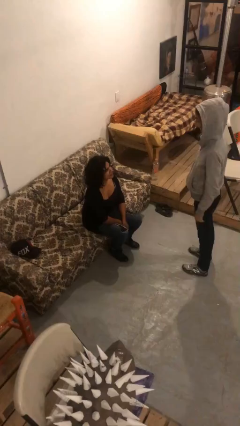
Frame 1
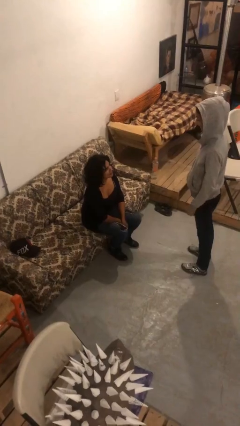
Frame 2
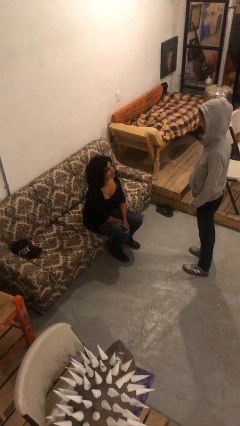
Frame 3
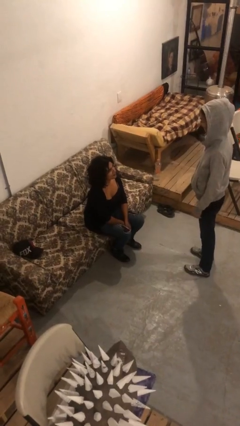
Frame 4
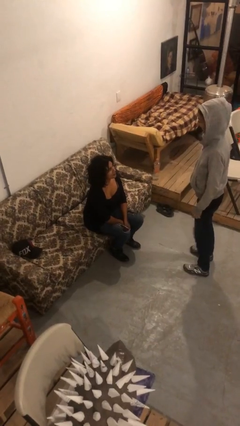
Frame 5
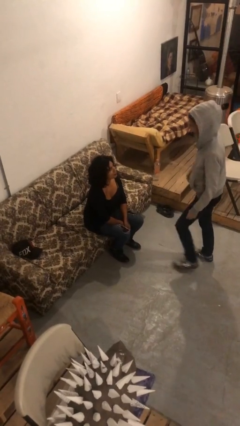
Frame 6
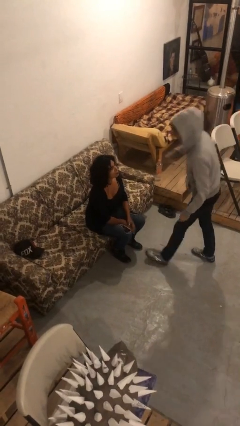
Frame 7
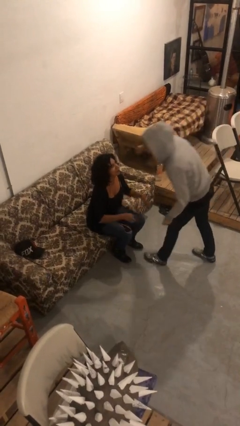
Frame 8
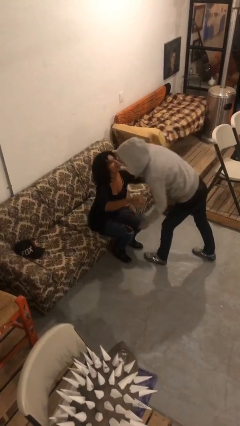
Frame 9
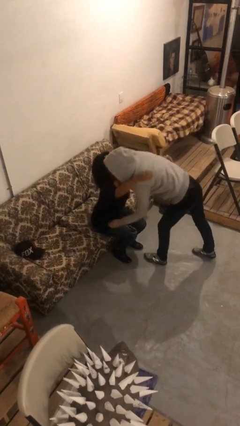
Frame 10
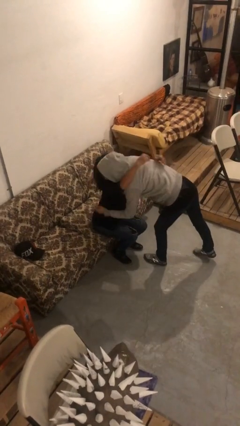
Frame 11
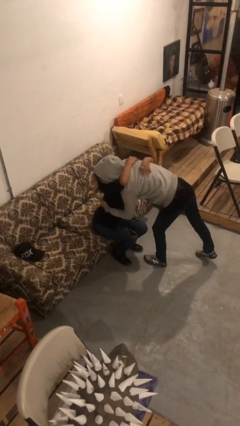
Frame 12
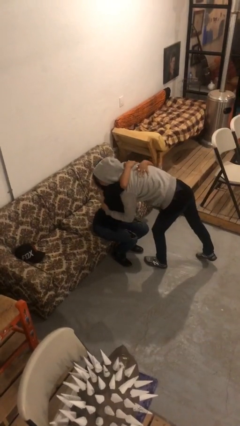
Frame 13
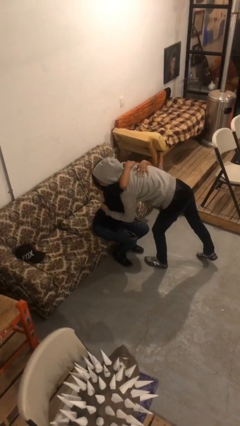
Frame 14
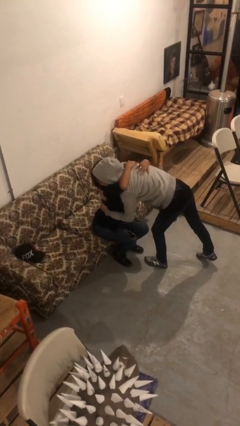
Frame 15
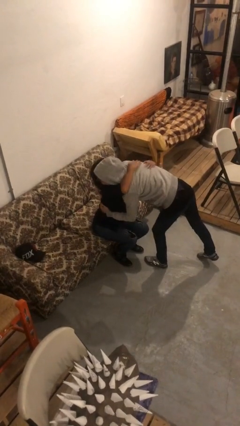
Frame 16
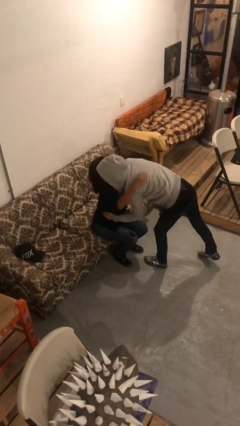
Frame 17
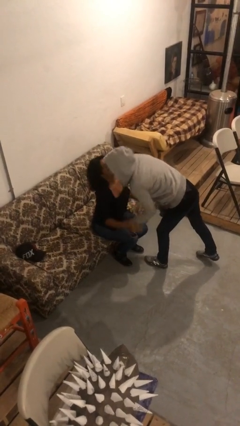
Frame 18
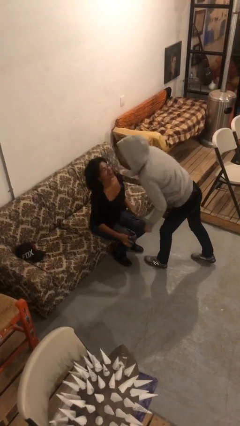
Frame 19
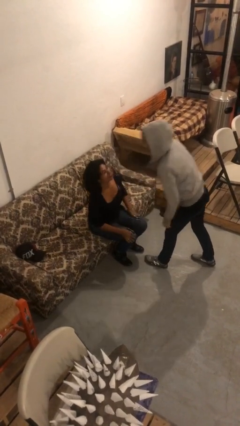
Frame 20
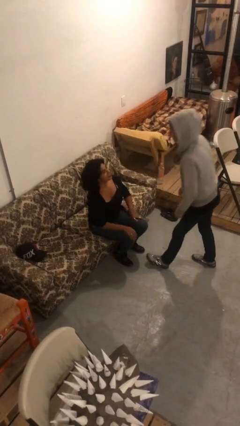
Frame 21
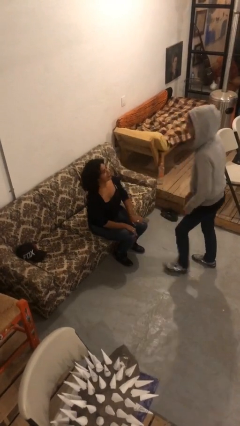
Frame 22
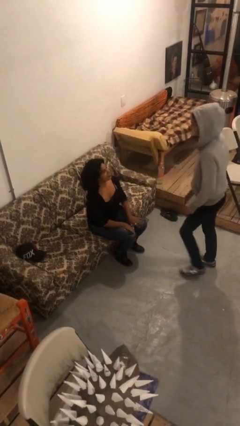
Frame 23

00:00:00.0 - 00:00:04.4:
person embraces person

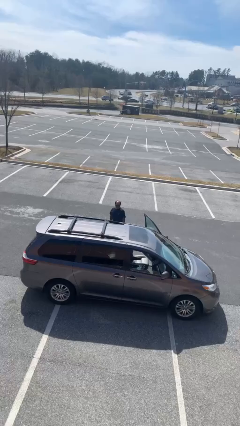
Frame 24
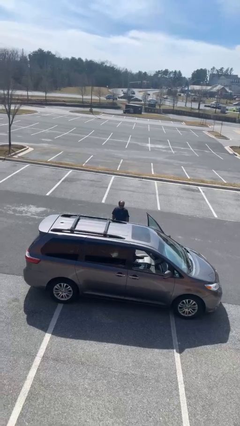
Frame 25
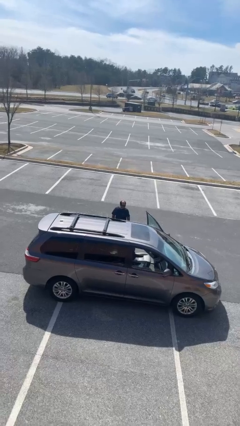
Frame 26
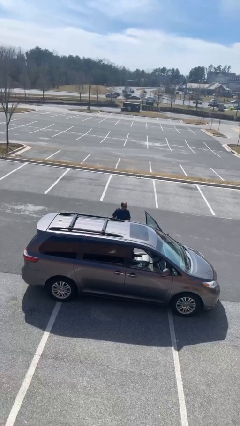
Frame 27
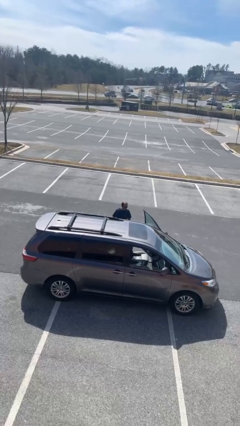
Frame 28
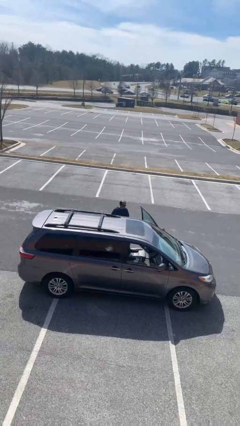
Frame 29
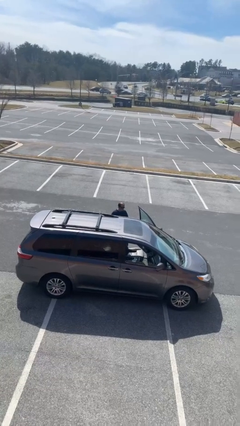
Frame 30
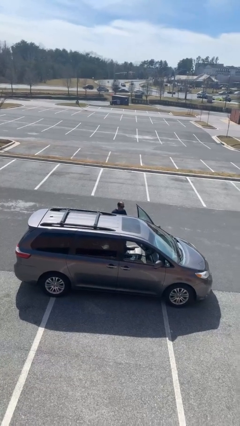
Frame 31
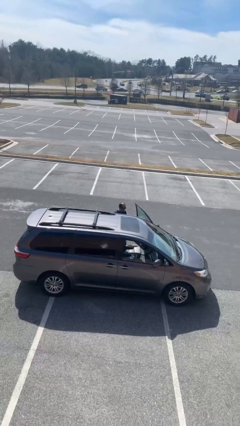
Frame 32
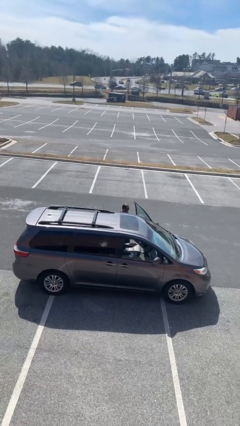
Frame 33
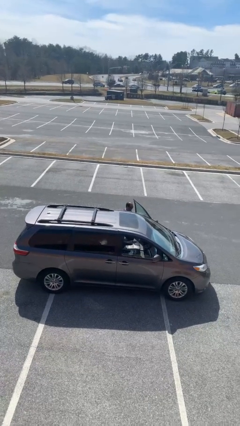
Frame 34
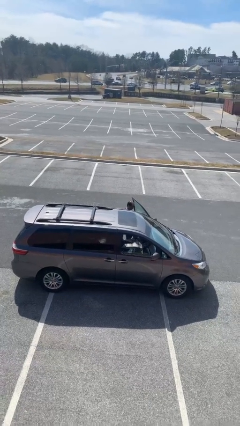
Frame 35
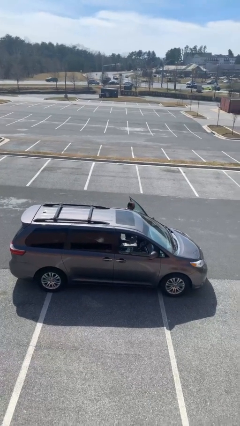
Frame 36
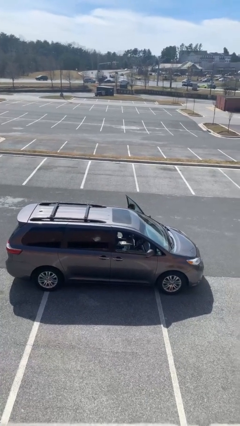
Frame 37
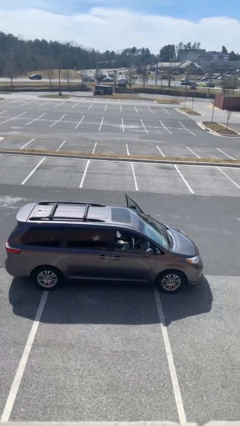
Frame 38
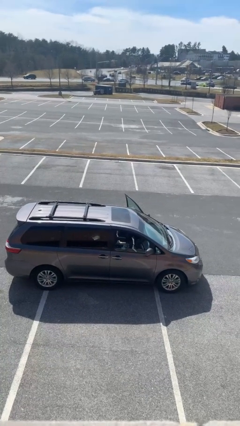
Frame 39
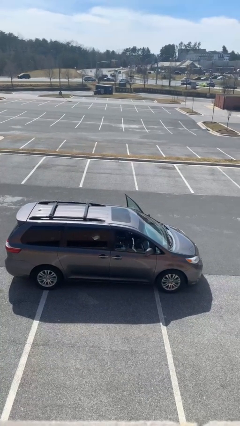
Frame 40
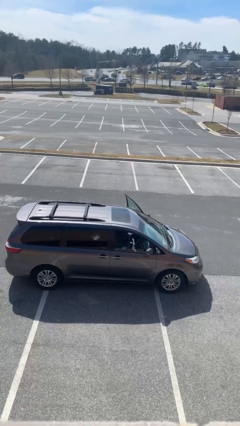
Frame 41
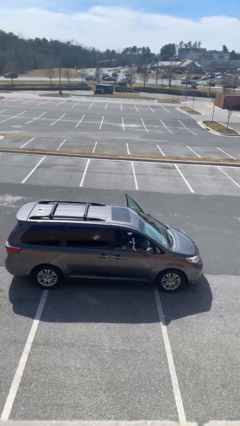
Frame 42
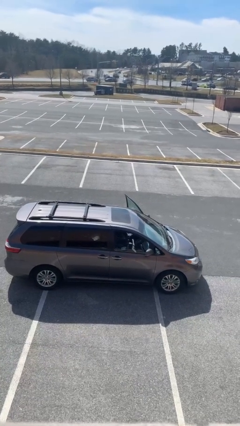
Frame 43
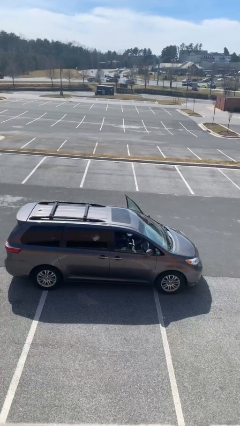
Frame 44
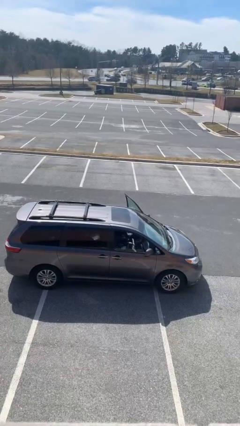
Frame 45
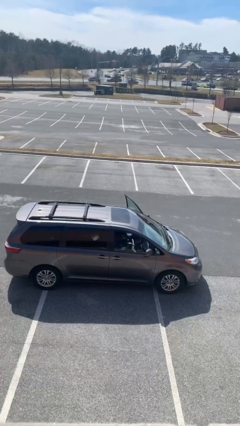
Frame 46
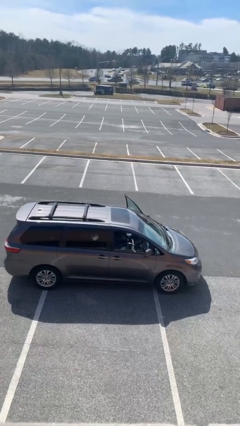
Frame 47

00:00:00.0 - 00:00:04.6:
person enters car

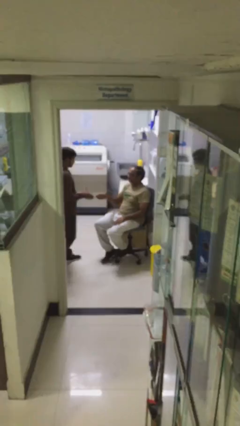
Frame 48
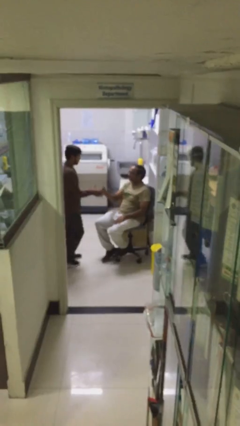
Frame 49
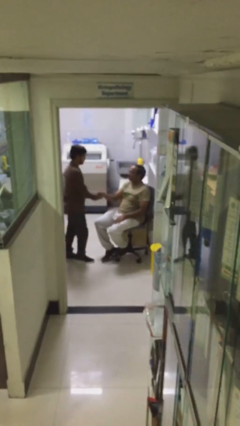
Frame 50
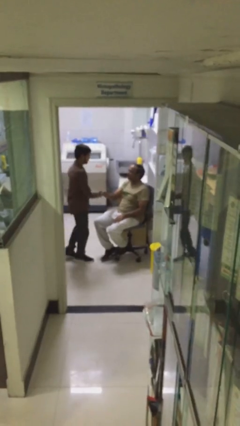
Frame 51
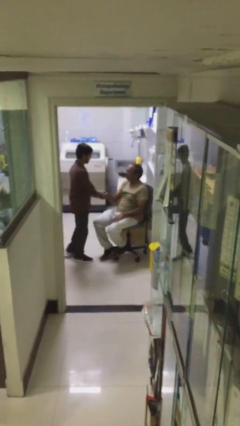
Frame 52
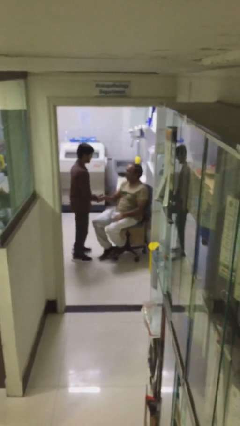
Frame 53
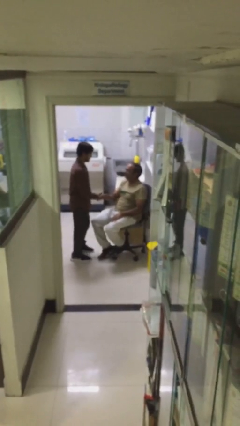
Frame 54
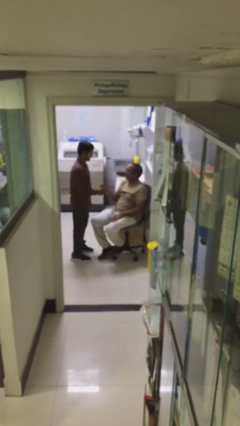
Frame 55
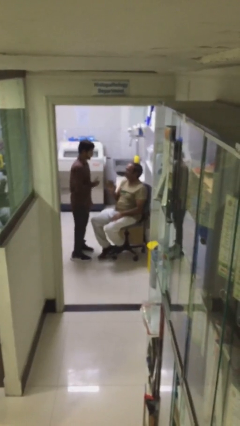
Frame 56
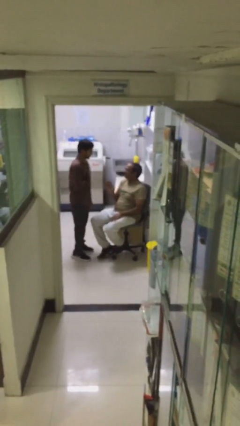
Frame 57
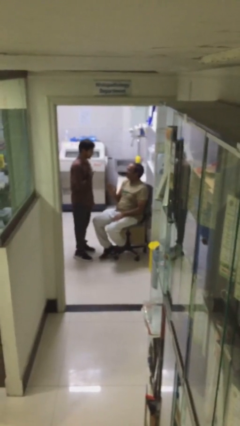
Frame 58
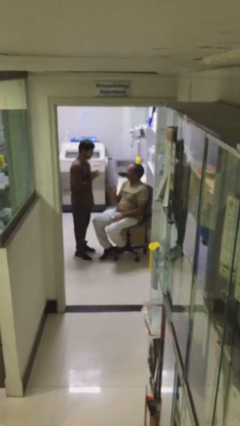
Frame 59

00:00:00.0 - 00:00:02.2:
person shakes hand

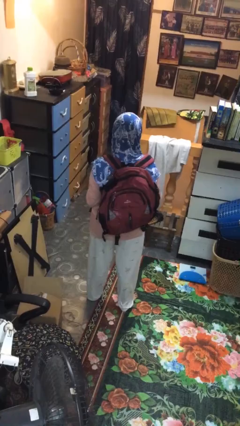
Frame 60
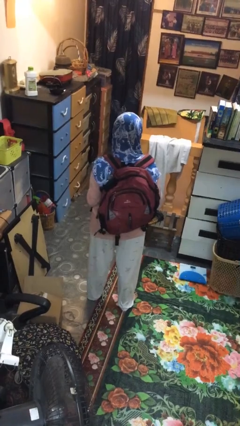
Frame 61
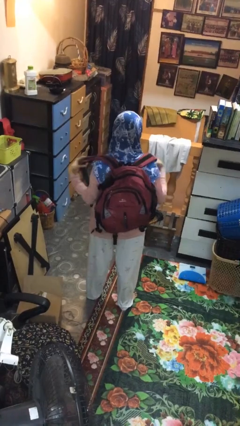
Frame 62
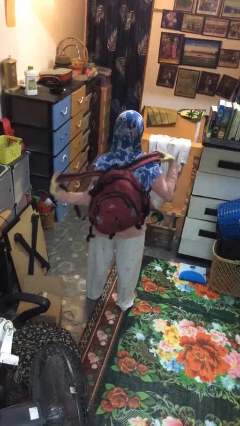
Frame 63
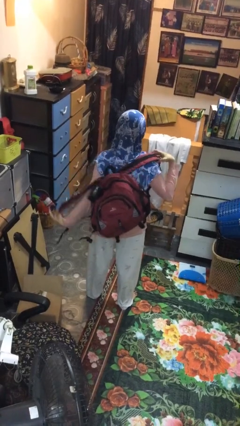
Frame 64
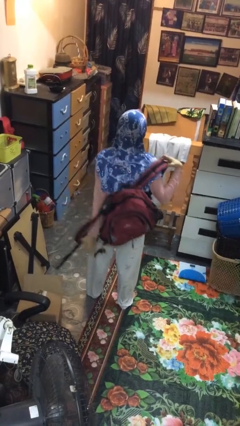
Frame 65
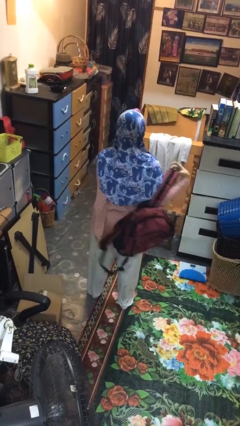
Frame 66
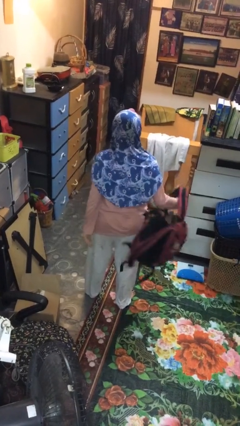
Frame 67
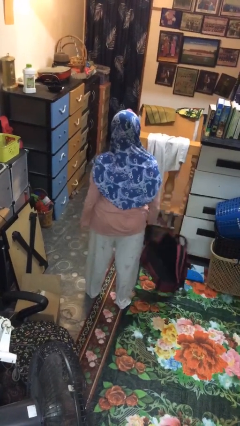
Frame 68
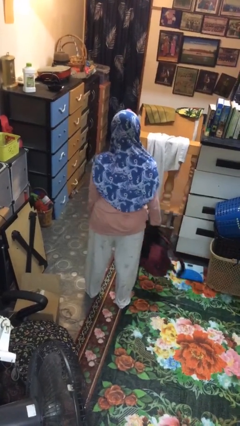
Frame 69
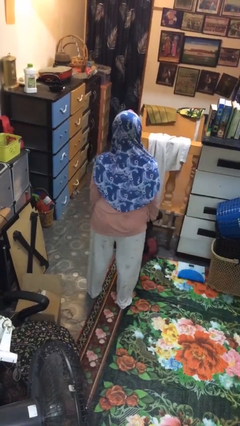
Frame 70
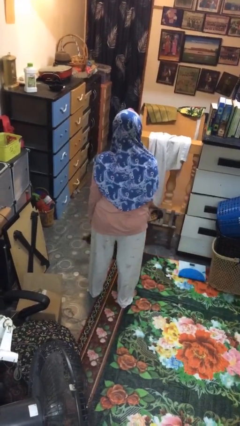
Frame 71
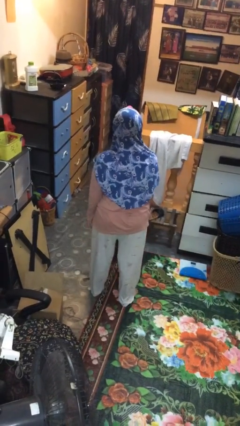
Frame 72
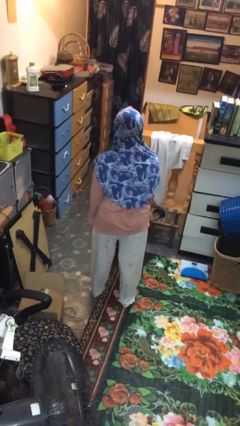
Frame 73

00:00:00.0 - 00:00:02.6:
person takes off backpack

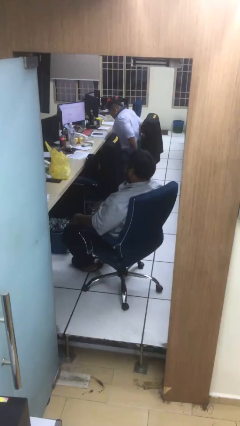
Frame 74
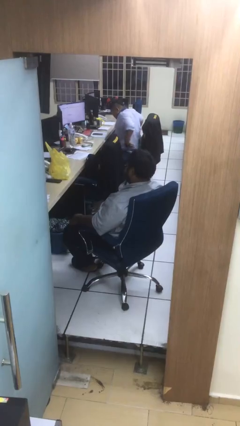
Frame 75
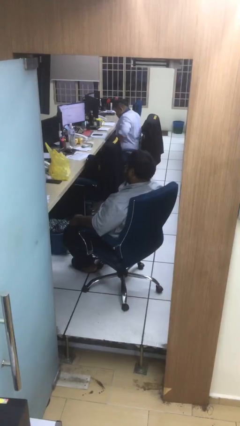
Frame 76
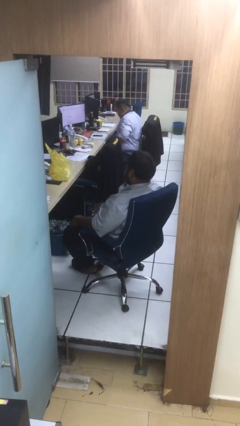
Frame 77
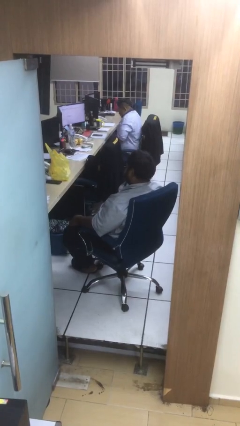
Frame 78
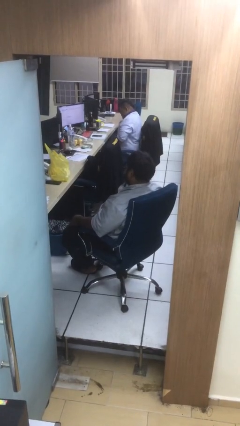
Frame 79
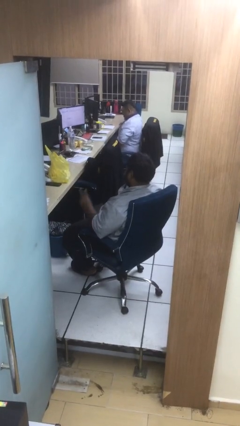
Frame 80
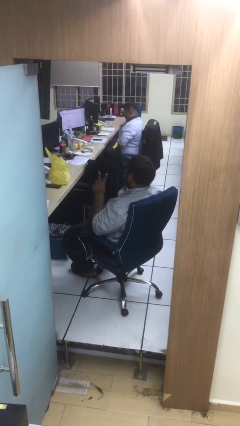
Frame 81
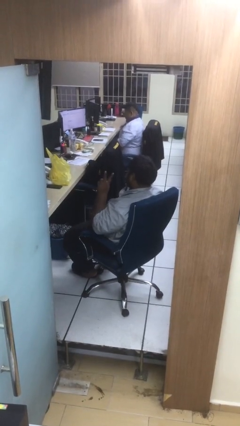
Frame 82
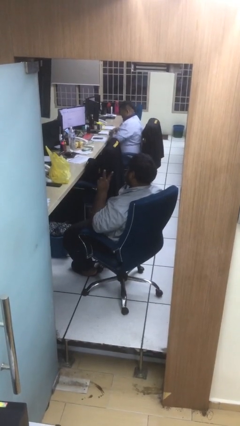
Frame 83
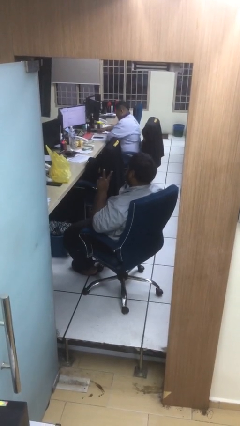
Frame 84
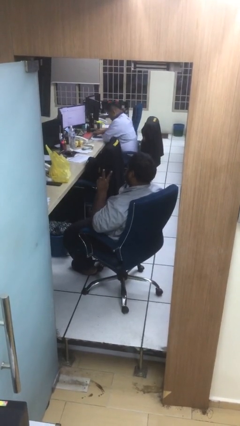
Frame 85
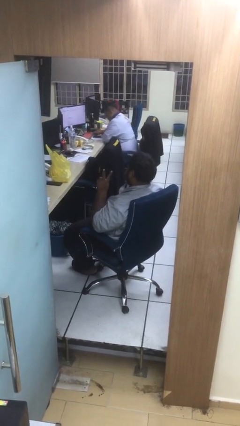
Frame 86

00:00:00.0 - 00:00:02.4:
person gestures peace

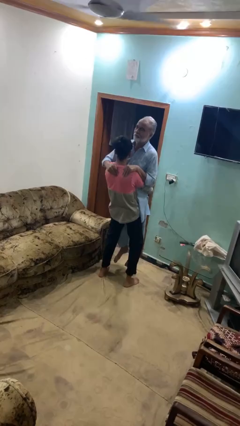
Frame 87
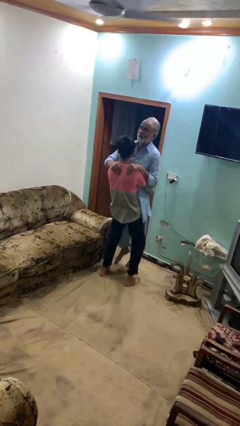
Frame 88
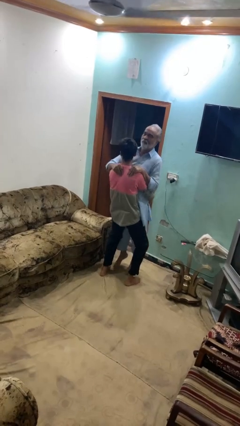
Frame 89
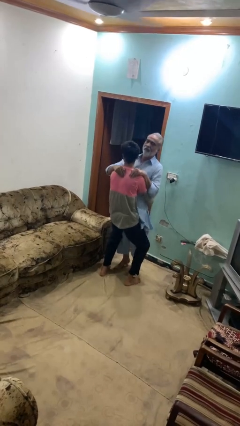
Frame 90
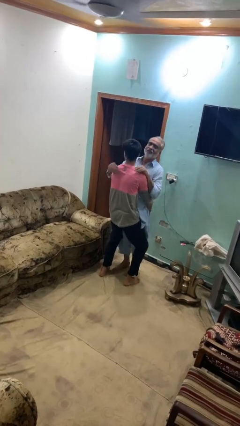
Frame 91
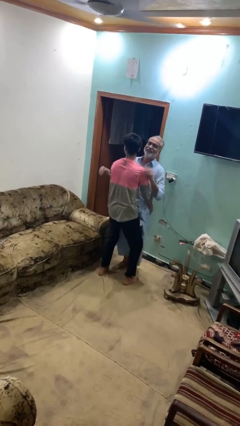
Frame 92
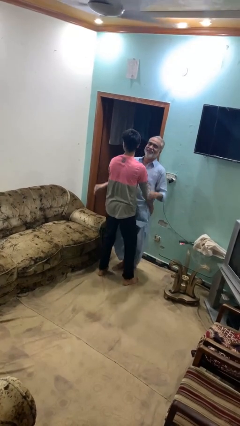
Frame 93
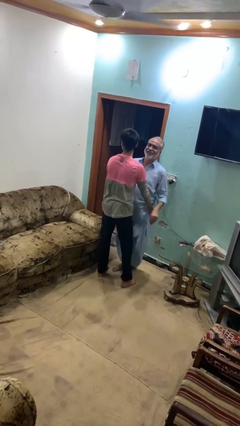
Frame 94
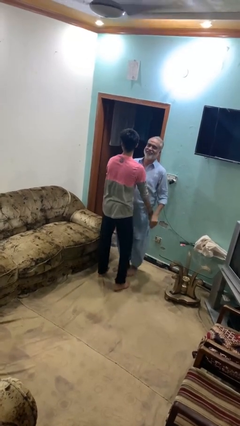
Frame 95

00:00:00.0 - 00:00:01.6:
person puts down person
